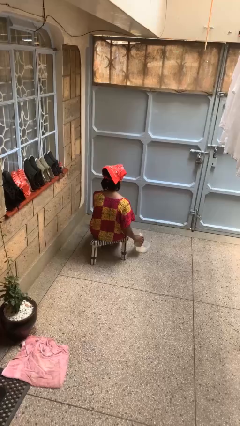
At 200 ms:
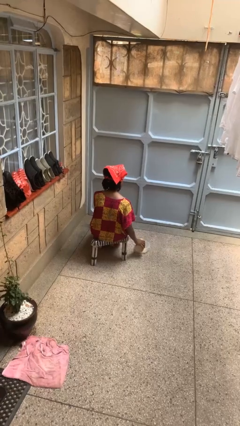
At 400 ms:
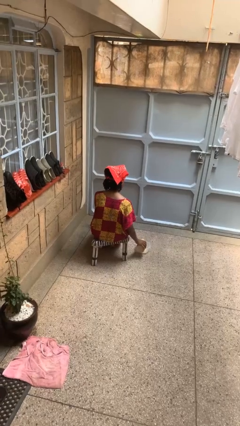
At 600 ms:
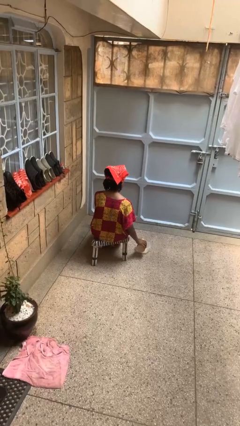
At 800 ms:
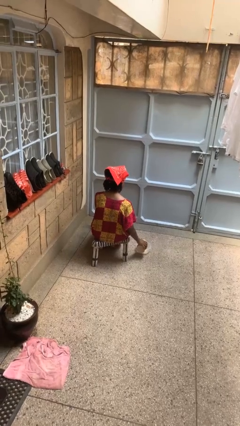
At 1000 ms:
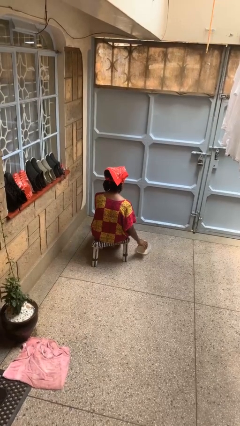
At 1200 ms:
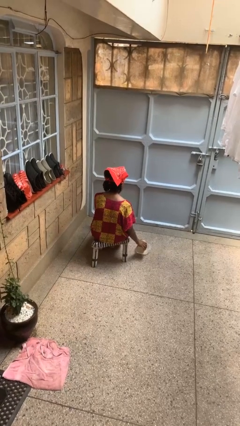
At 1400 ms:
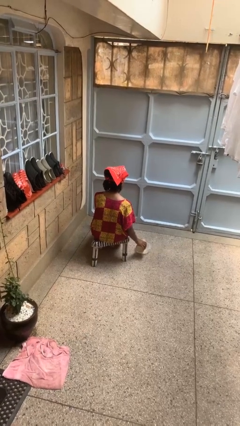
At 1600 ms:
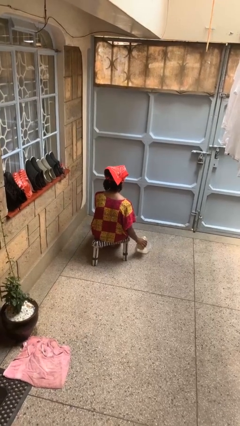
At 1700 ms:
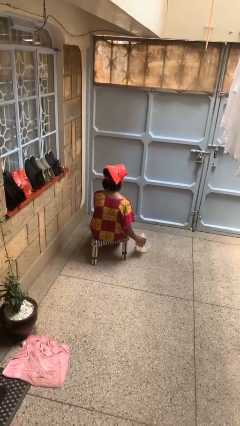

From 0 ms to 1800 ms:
person pours into bowl

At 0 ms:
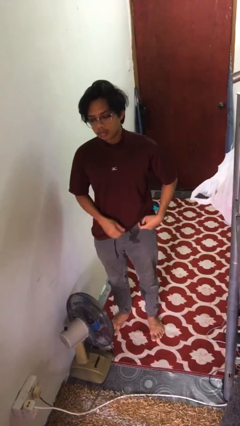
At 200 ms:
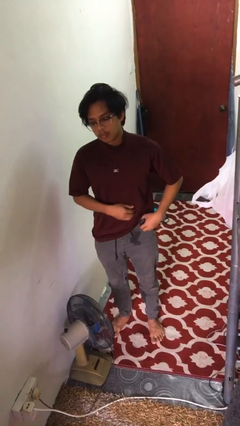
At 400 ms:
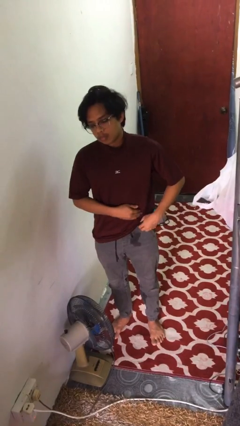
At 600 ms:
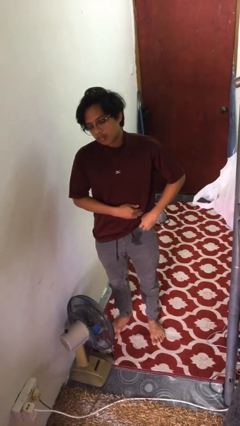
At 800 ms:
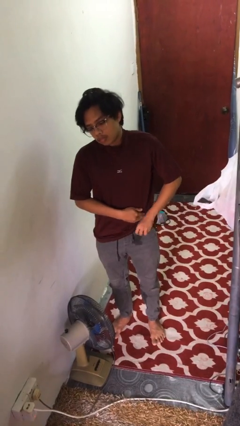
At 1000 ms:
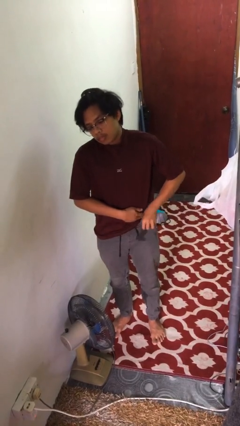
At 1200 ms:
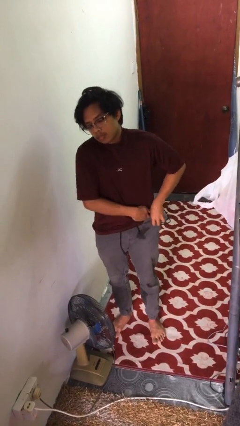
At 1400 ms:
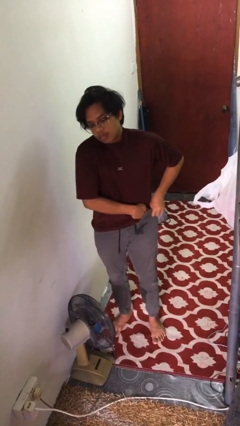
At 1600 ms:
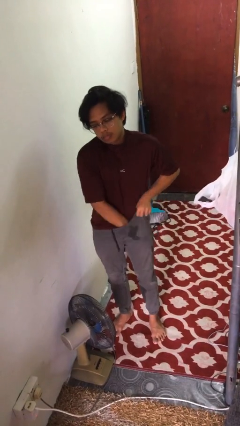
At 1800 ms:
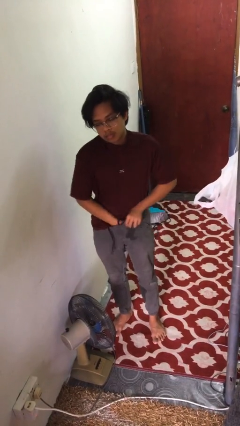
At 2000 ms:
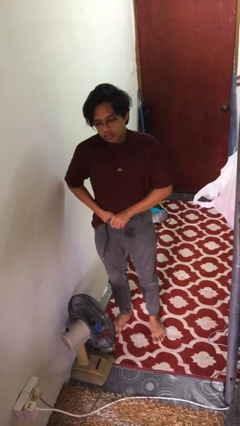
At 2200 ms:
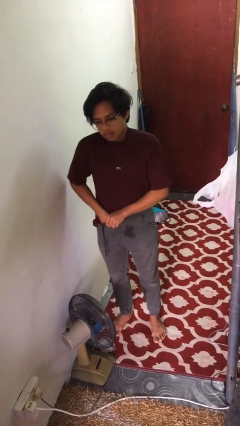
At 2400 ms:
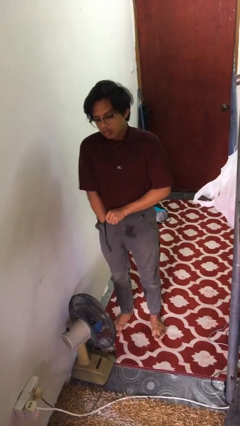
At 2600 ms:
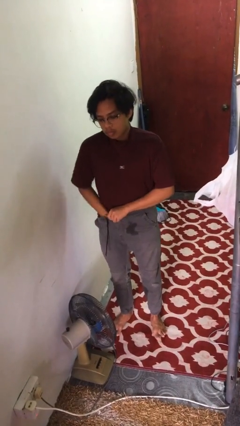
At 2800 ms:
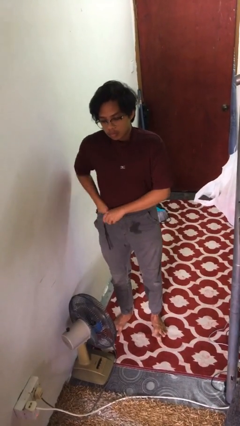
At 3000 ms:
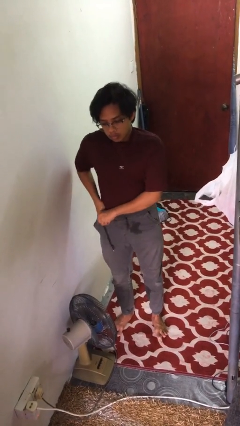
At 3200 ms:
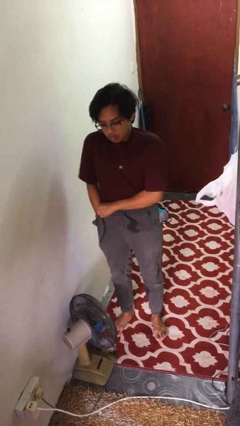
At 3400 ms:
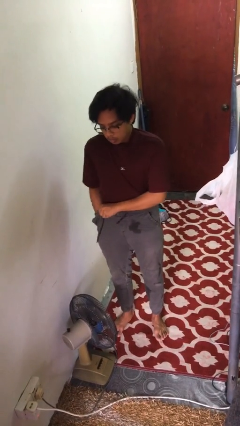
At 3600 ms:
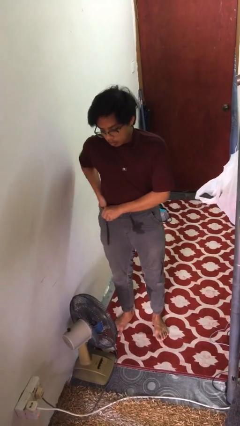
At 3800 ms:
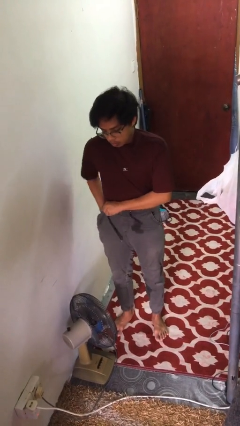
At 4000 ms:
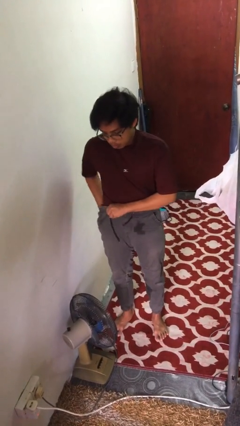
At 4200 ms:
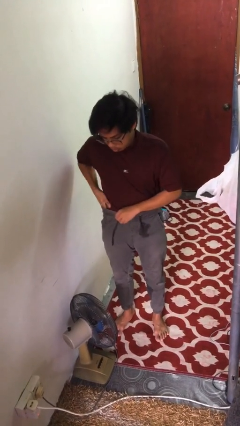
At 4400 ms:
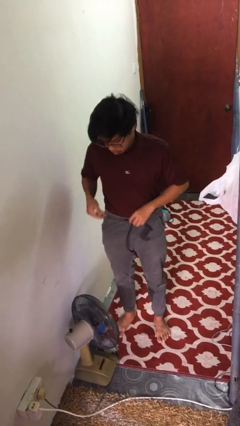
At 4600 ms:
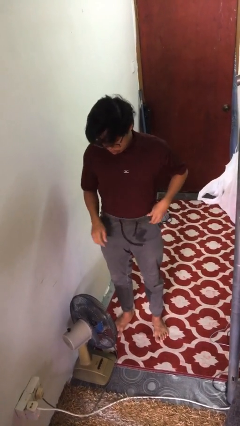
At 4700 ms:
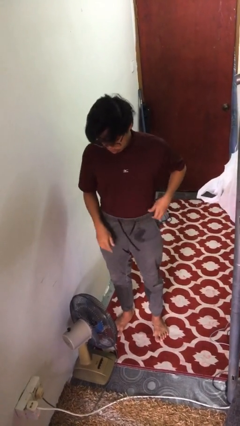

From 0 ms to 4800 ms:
person tucks in shirt

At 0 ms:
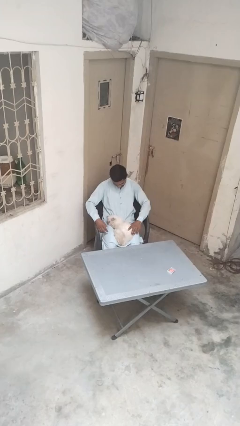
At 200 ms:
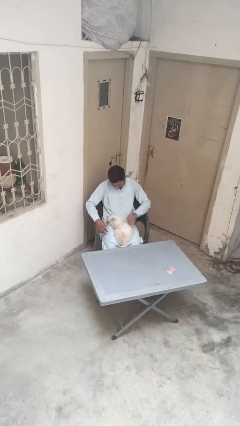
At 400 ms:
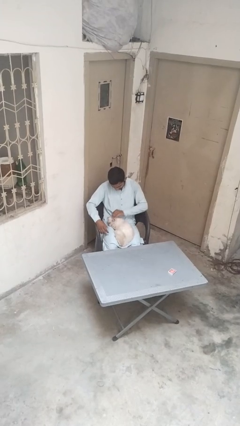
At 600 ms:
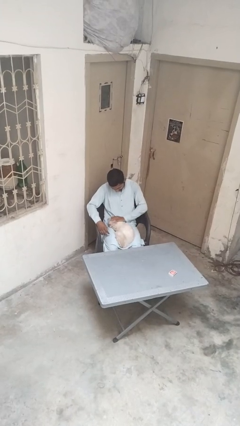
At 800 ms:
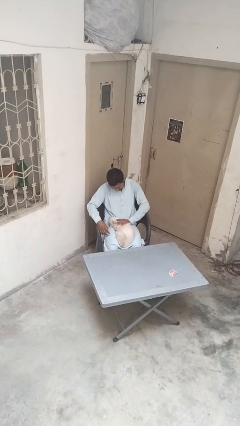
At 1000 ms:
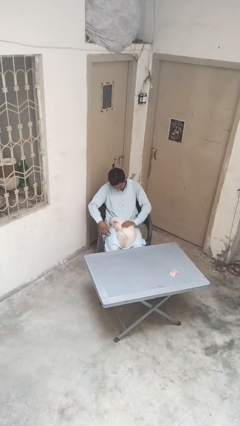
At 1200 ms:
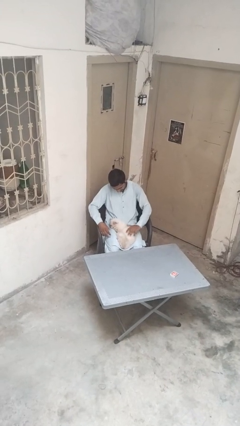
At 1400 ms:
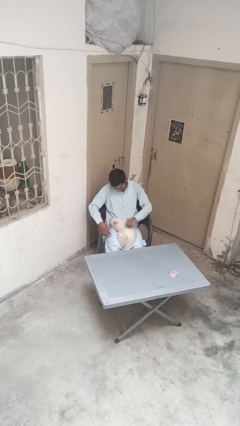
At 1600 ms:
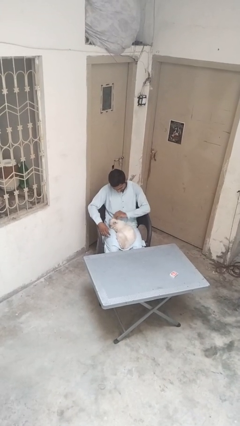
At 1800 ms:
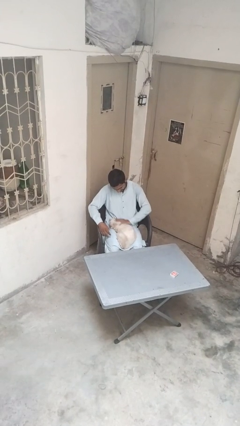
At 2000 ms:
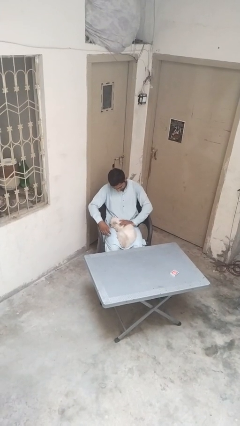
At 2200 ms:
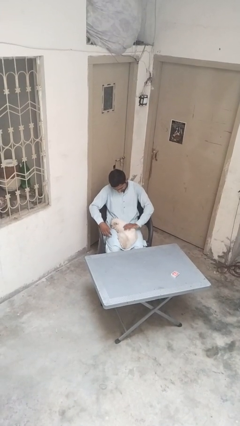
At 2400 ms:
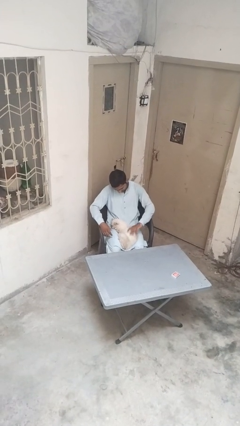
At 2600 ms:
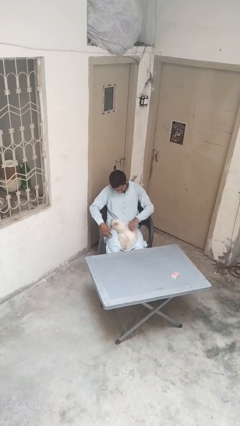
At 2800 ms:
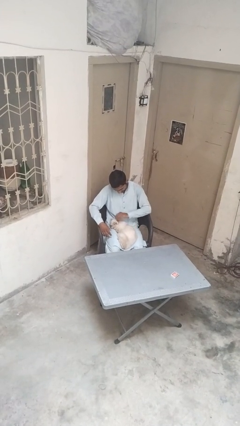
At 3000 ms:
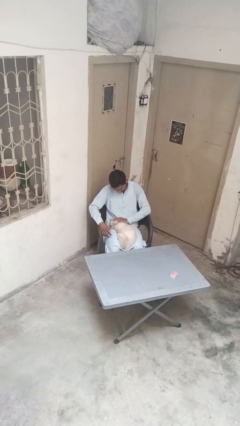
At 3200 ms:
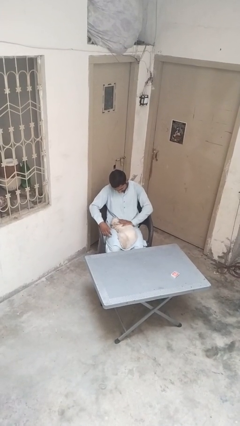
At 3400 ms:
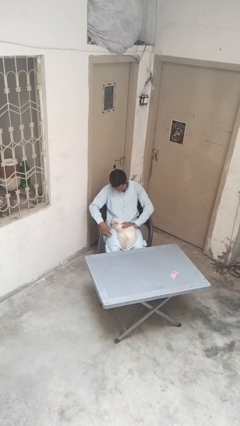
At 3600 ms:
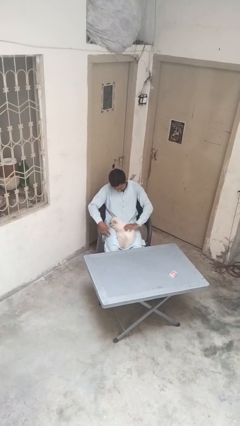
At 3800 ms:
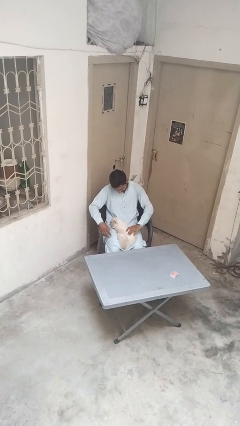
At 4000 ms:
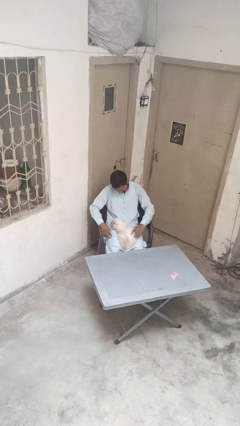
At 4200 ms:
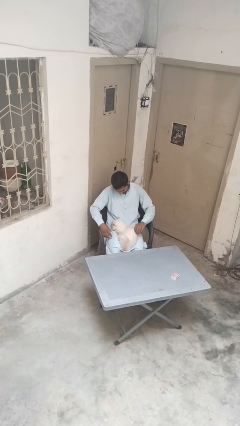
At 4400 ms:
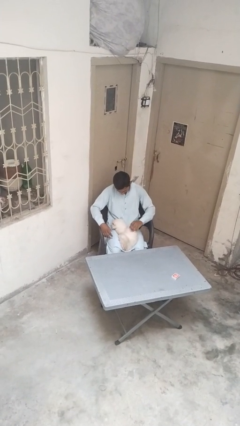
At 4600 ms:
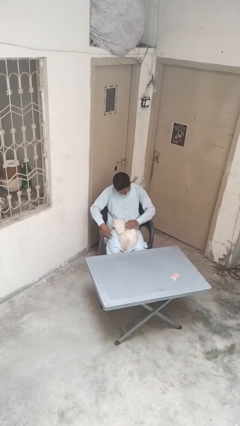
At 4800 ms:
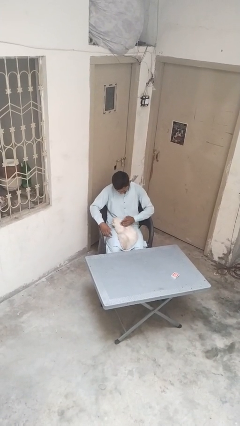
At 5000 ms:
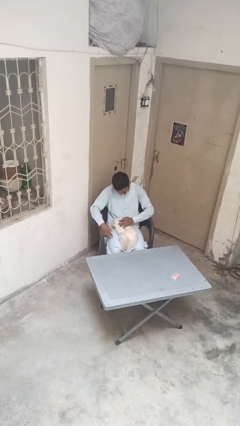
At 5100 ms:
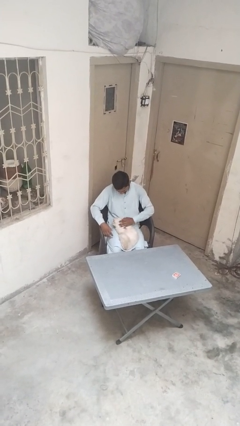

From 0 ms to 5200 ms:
person pets cat

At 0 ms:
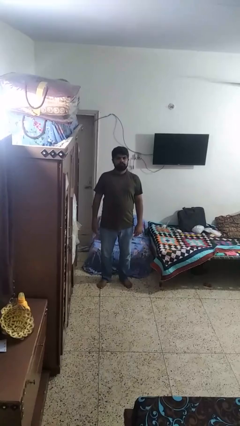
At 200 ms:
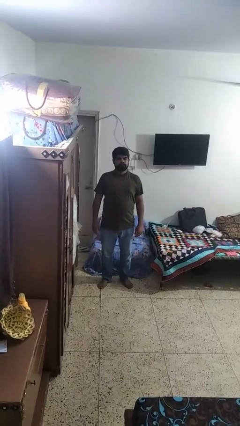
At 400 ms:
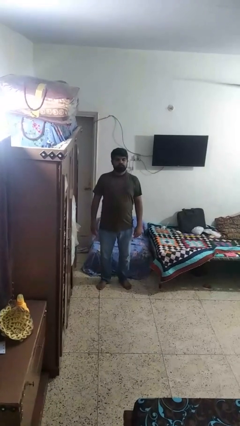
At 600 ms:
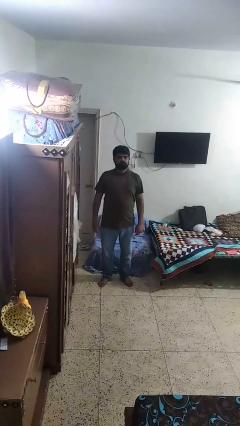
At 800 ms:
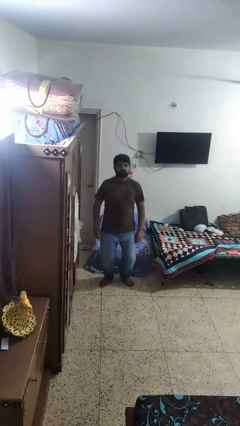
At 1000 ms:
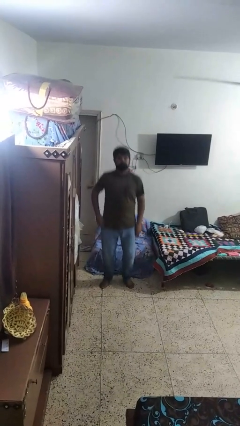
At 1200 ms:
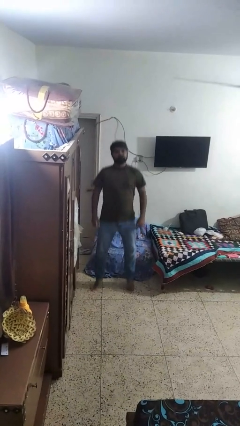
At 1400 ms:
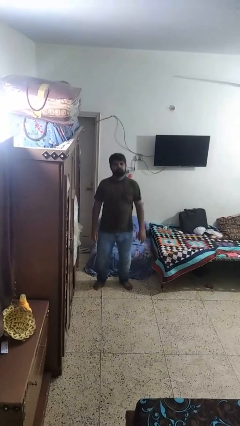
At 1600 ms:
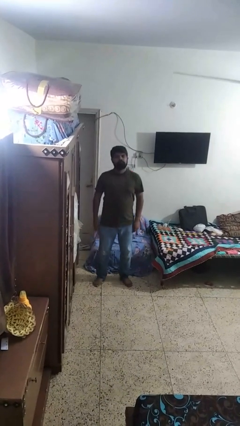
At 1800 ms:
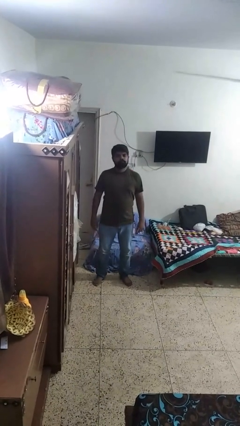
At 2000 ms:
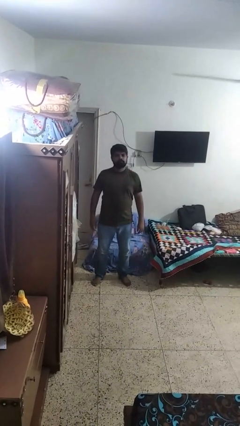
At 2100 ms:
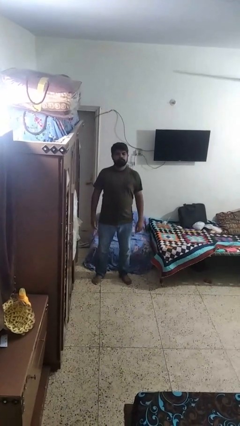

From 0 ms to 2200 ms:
person jumps

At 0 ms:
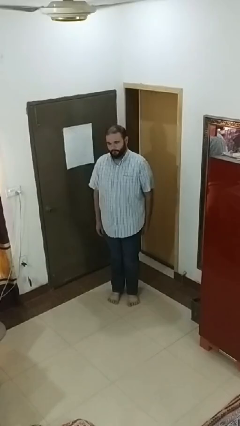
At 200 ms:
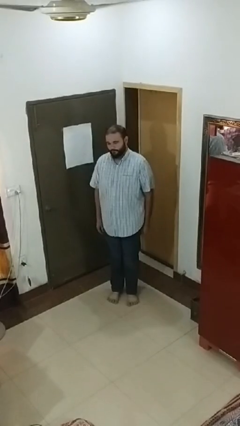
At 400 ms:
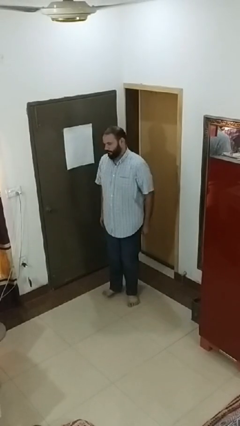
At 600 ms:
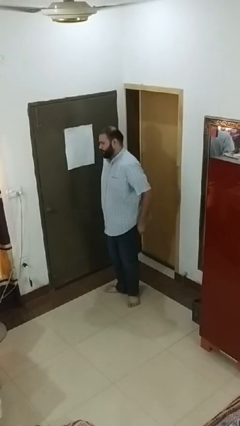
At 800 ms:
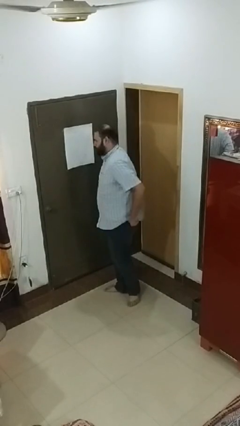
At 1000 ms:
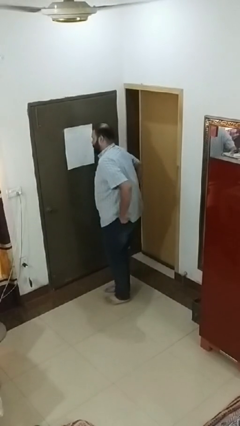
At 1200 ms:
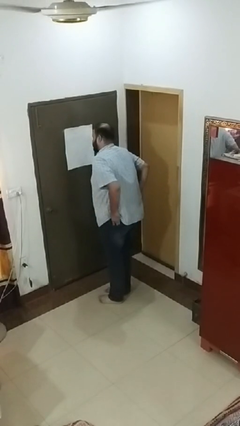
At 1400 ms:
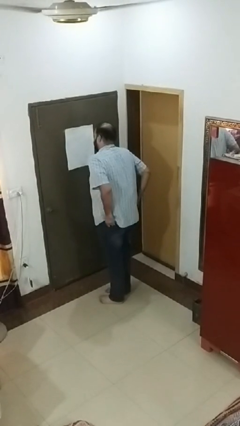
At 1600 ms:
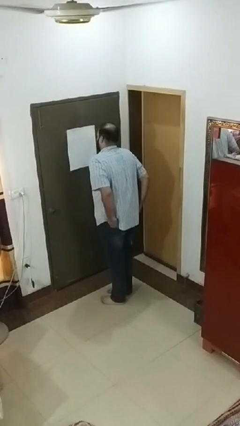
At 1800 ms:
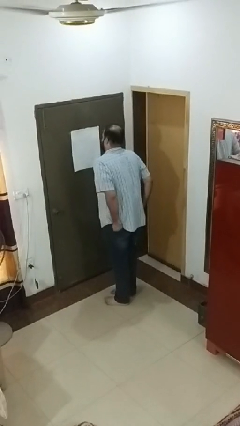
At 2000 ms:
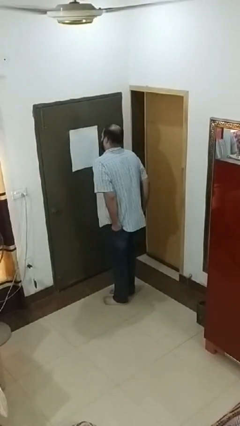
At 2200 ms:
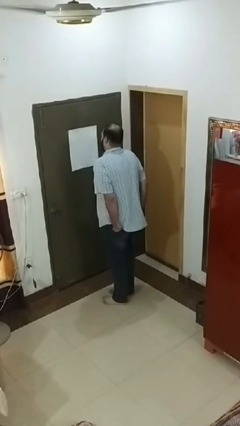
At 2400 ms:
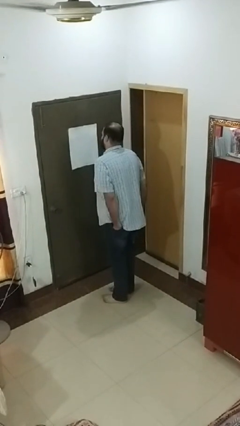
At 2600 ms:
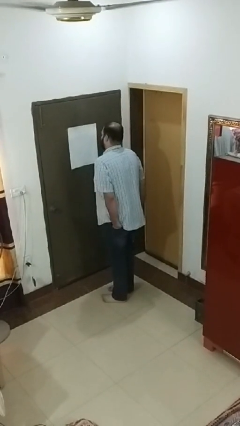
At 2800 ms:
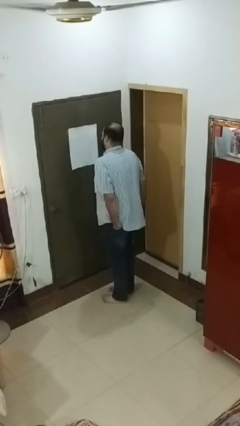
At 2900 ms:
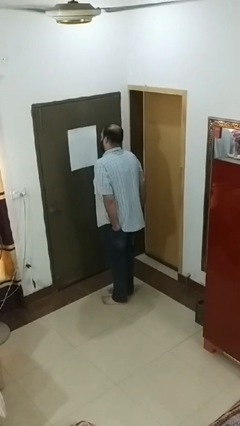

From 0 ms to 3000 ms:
person puts hands in back pockets

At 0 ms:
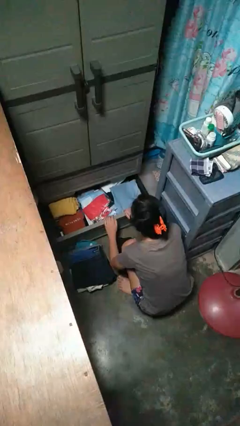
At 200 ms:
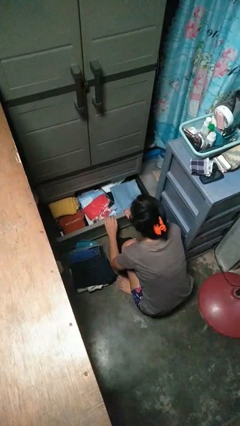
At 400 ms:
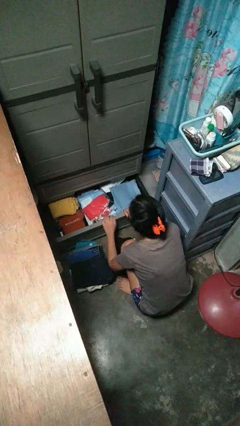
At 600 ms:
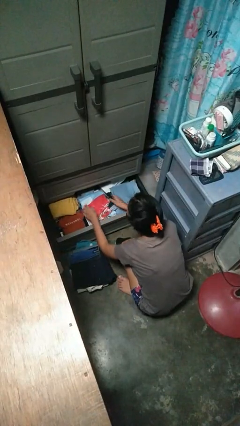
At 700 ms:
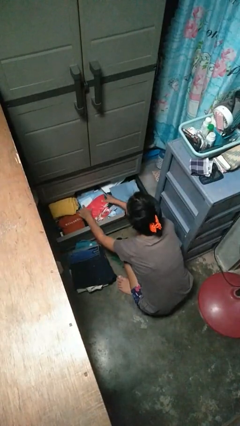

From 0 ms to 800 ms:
person takes clothes from dresser
